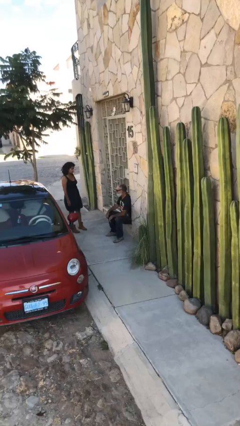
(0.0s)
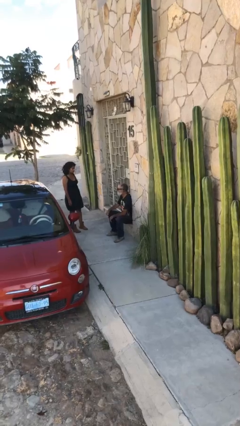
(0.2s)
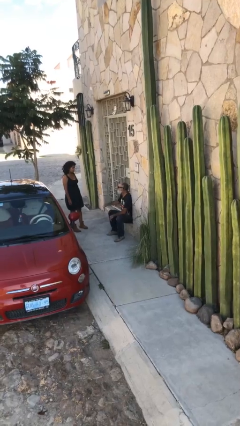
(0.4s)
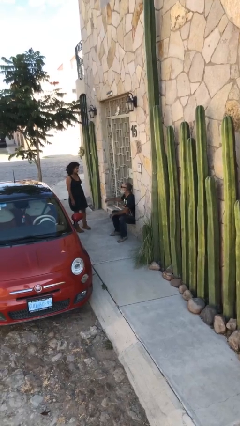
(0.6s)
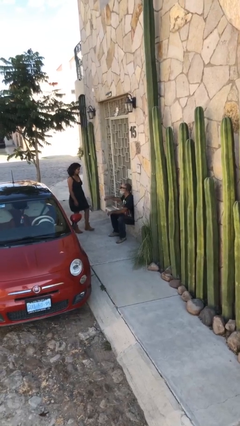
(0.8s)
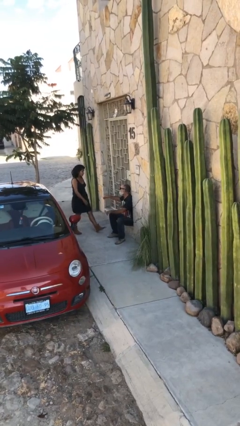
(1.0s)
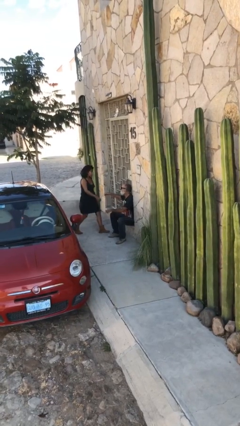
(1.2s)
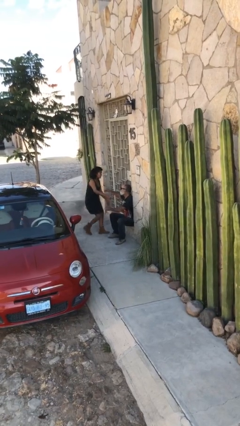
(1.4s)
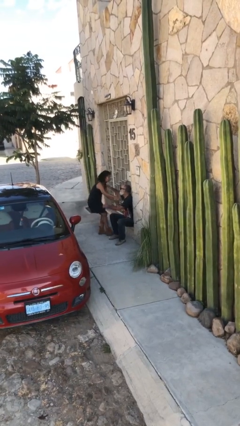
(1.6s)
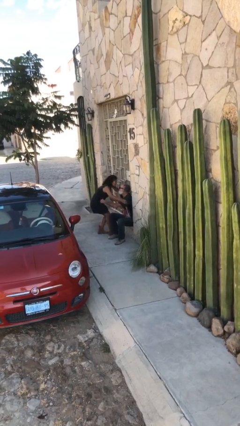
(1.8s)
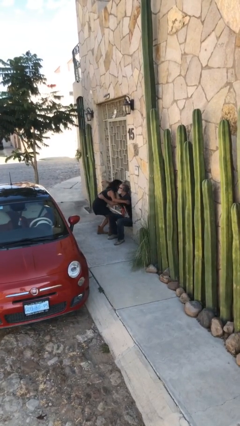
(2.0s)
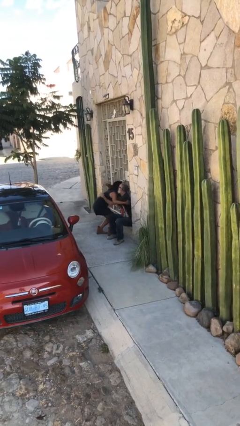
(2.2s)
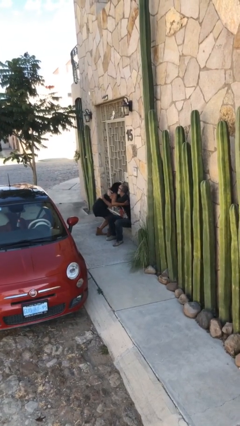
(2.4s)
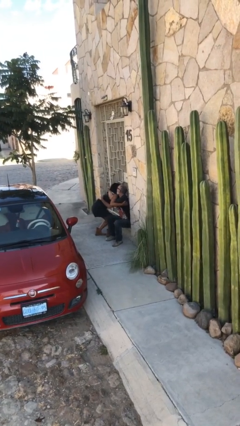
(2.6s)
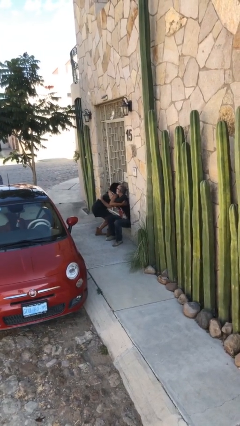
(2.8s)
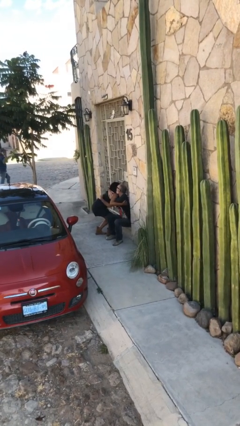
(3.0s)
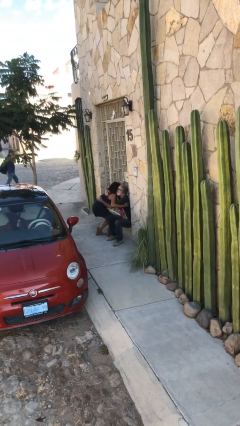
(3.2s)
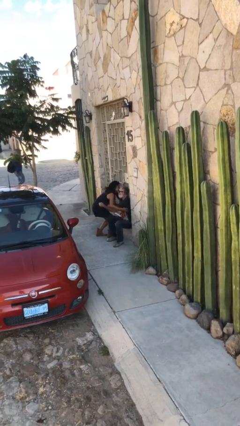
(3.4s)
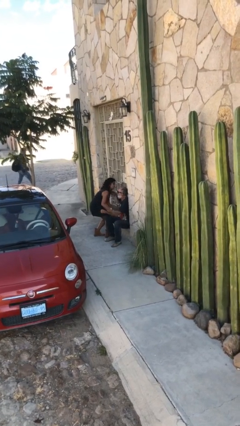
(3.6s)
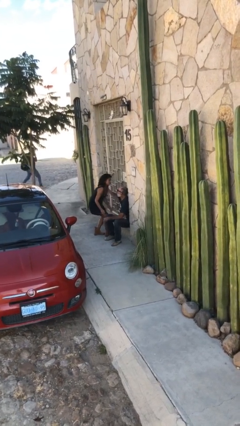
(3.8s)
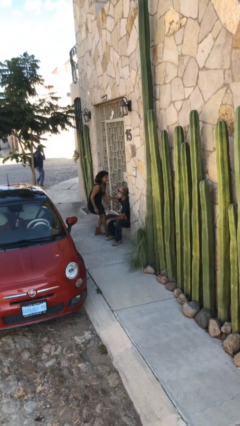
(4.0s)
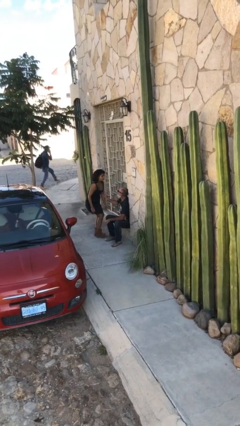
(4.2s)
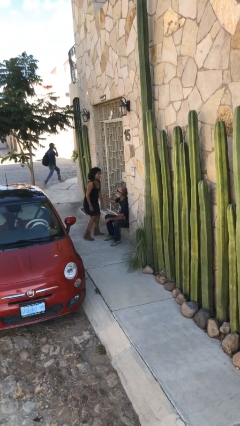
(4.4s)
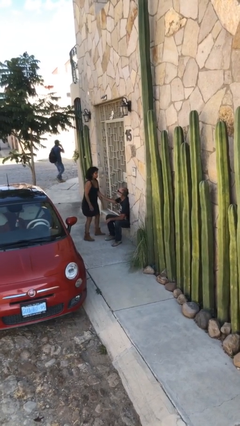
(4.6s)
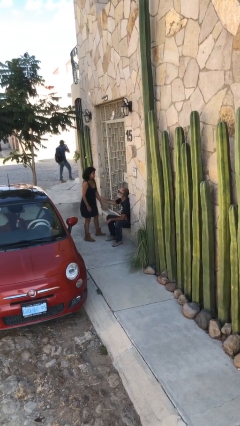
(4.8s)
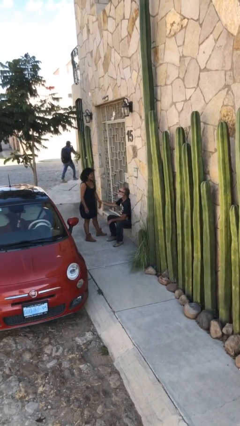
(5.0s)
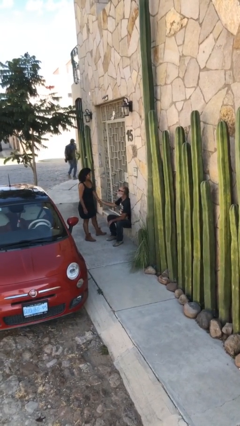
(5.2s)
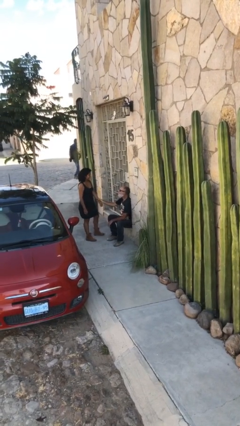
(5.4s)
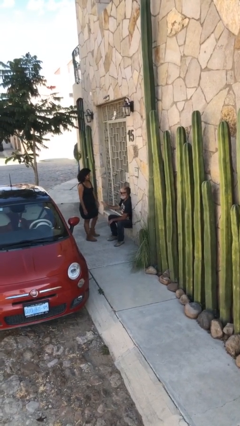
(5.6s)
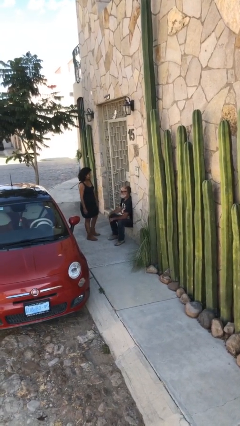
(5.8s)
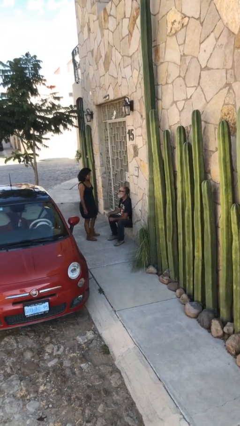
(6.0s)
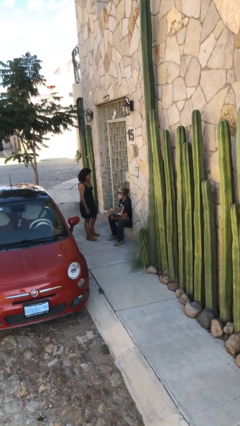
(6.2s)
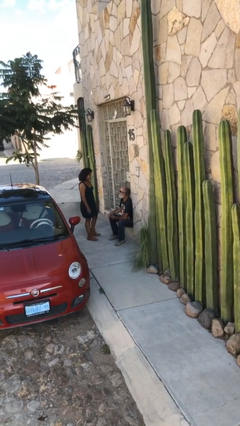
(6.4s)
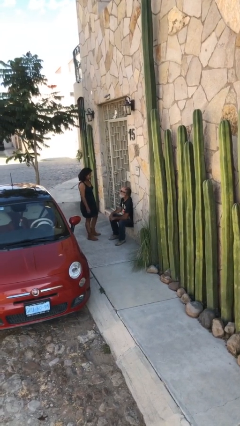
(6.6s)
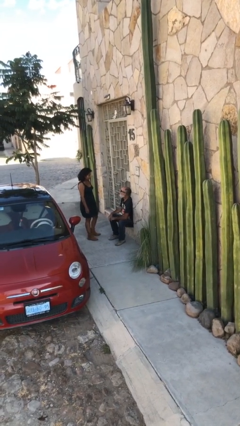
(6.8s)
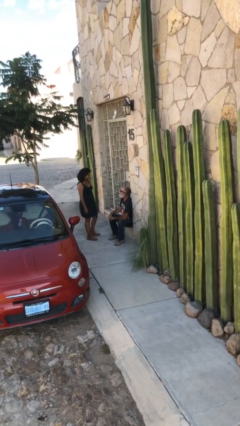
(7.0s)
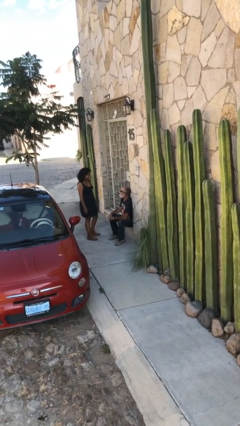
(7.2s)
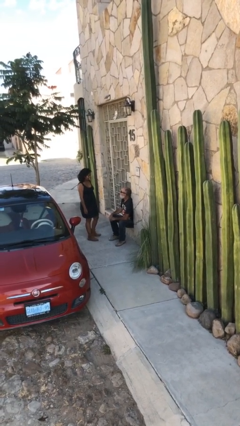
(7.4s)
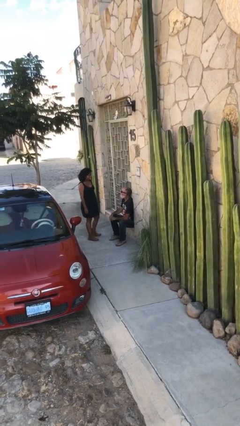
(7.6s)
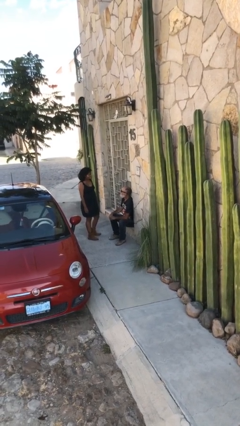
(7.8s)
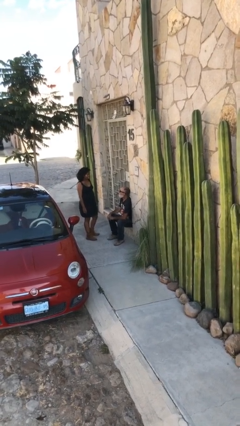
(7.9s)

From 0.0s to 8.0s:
person embraces person

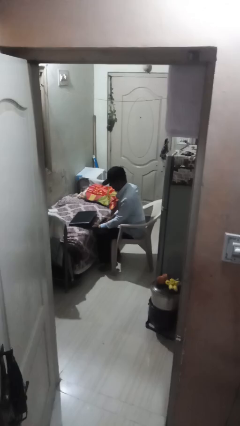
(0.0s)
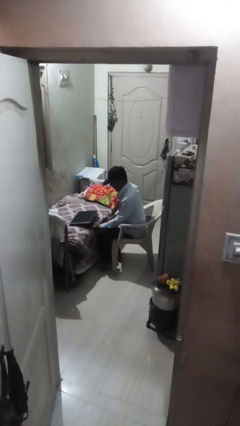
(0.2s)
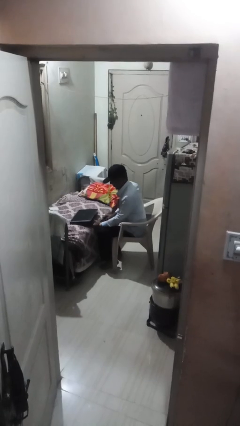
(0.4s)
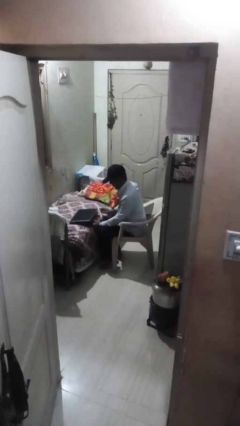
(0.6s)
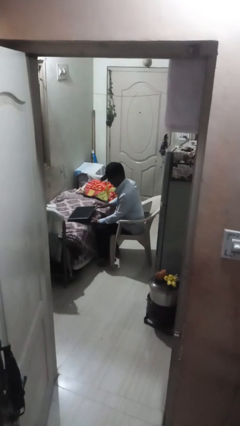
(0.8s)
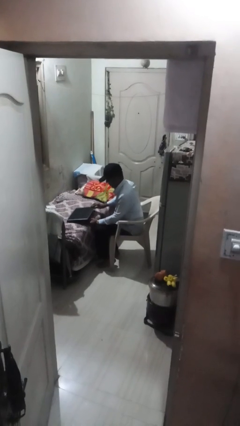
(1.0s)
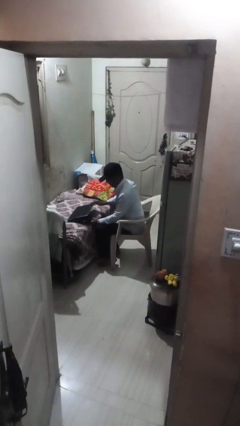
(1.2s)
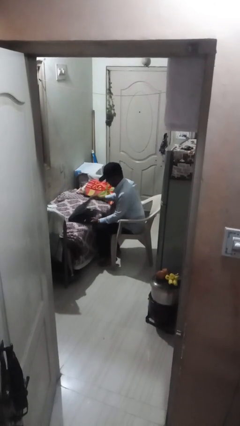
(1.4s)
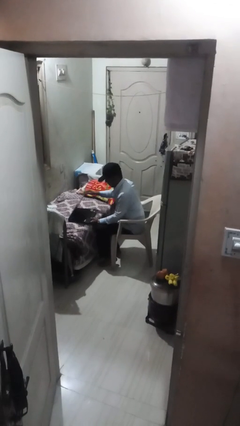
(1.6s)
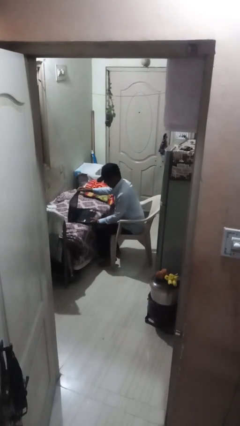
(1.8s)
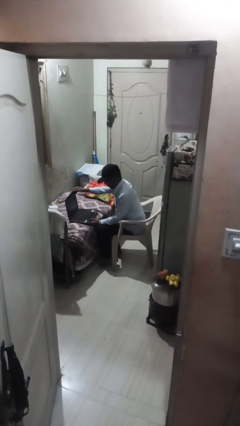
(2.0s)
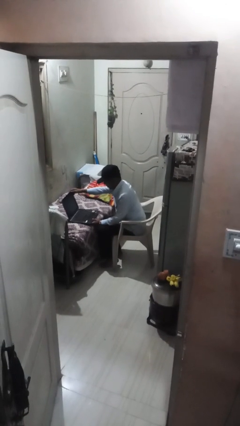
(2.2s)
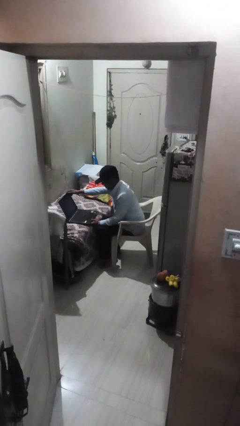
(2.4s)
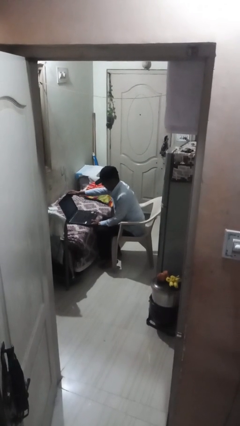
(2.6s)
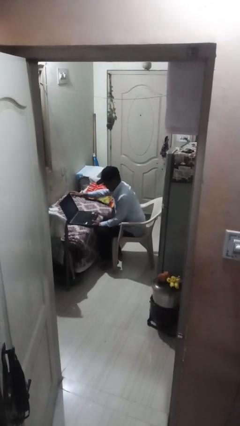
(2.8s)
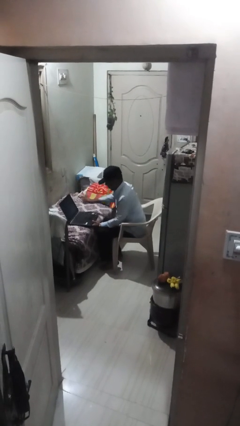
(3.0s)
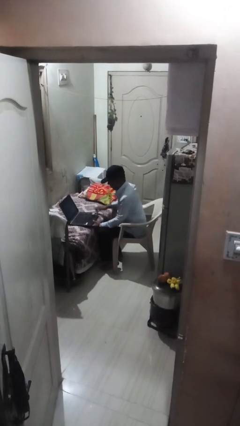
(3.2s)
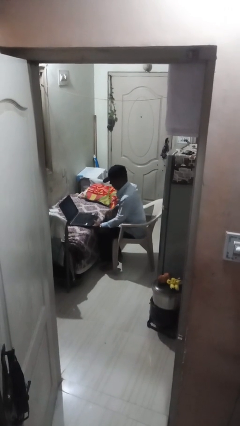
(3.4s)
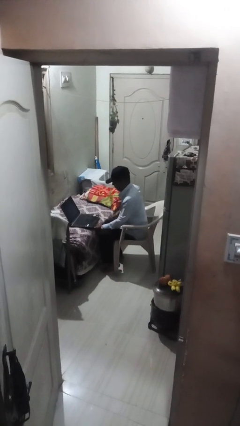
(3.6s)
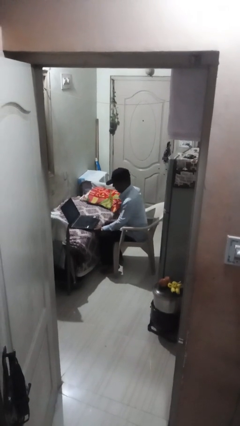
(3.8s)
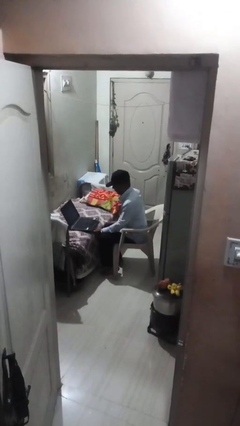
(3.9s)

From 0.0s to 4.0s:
person opens laptop

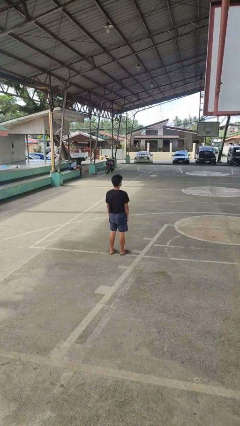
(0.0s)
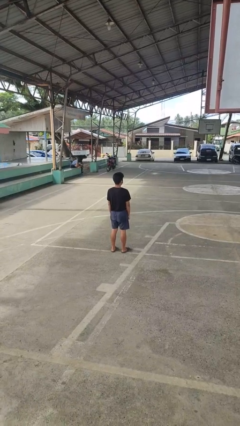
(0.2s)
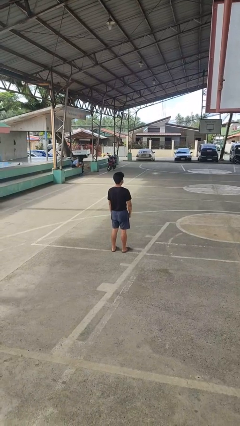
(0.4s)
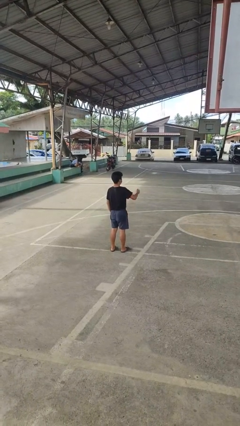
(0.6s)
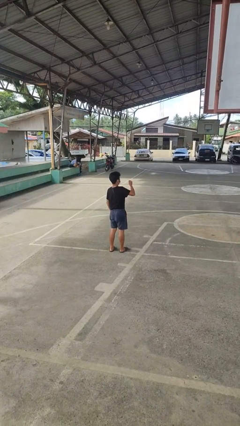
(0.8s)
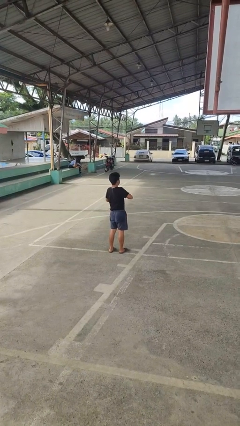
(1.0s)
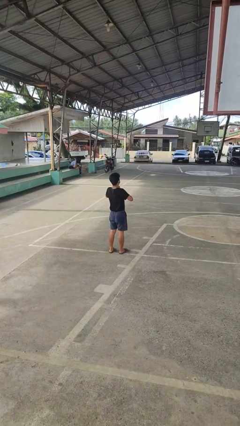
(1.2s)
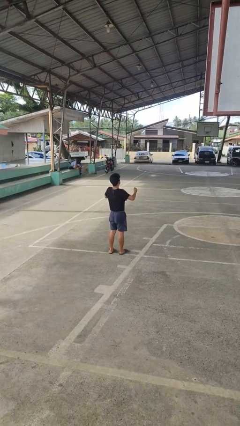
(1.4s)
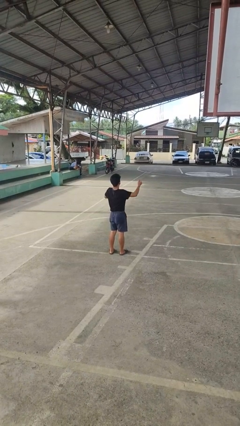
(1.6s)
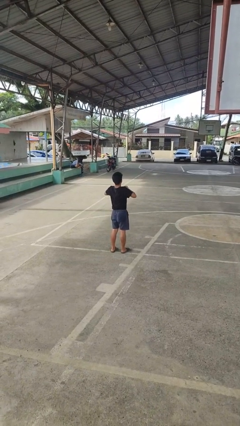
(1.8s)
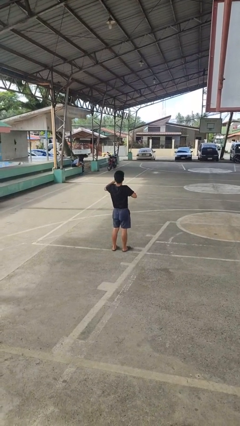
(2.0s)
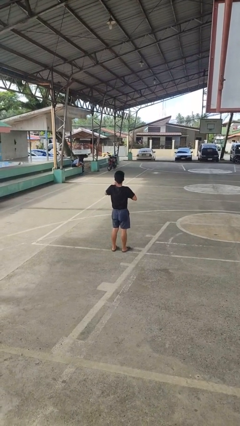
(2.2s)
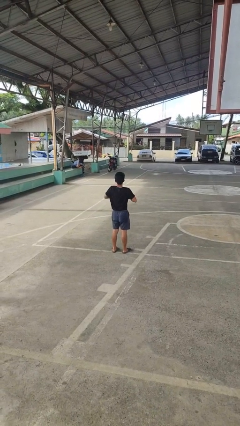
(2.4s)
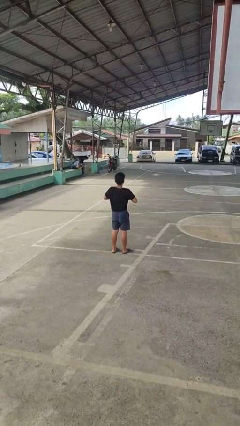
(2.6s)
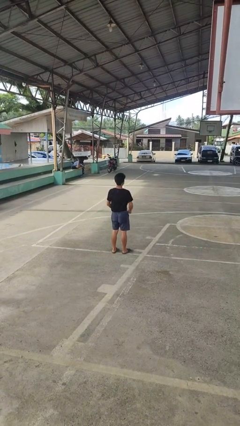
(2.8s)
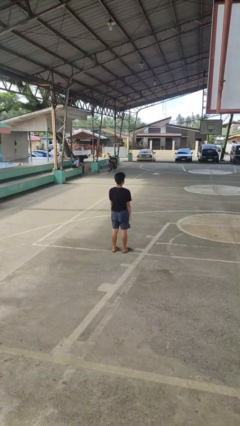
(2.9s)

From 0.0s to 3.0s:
person drums on chest

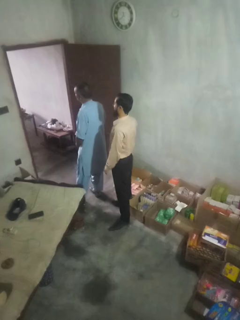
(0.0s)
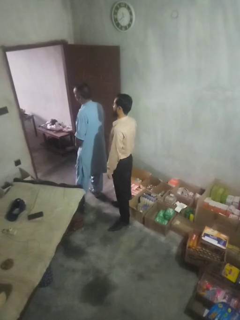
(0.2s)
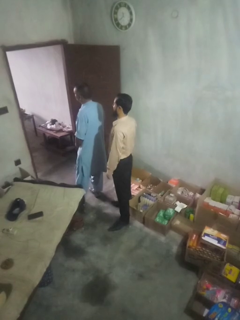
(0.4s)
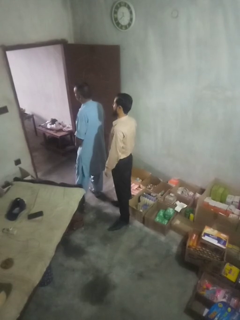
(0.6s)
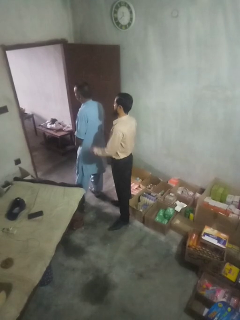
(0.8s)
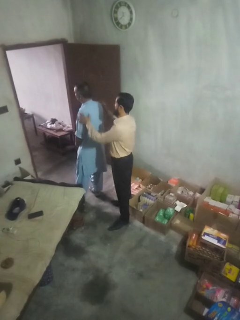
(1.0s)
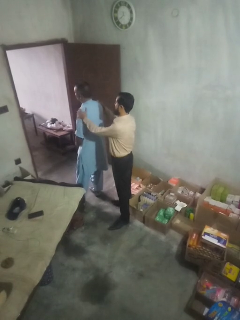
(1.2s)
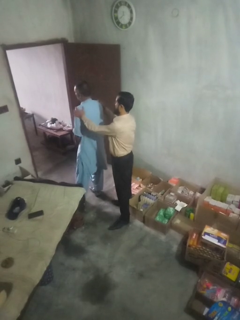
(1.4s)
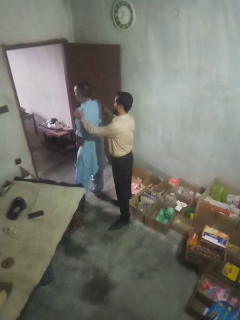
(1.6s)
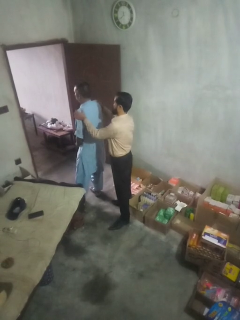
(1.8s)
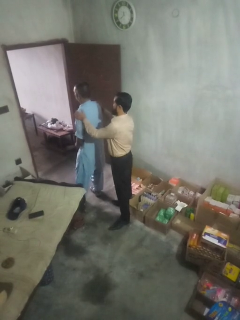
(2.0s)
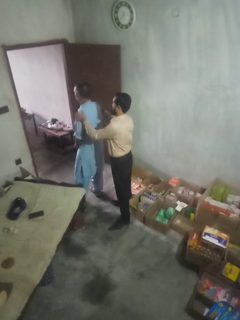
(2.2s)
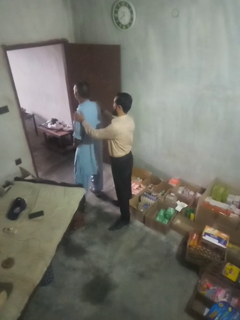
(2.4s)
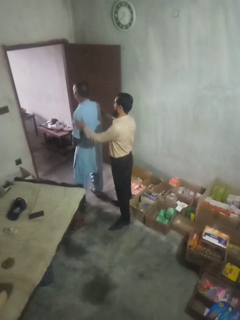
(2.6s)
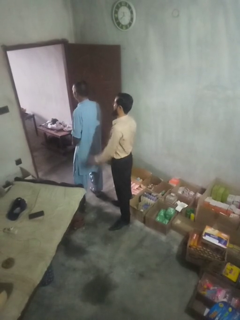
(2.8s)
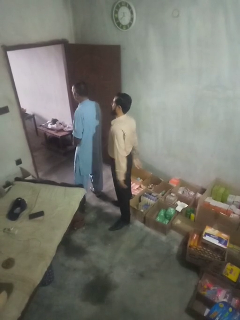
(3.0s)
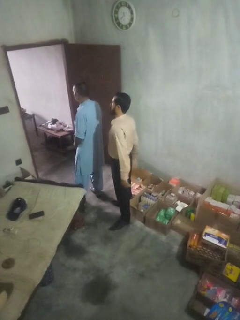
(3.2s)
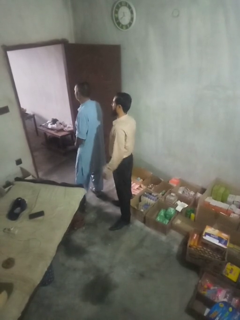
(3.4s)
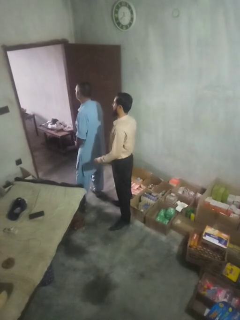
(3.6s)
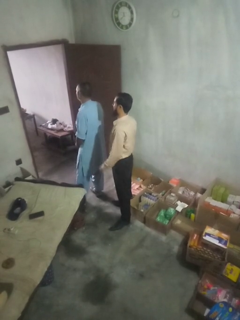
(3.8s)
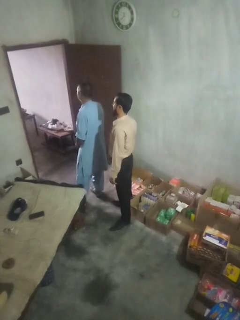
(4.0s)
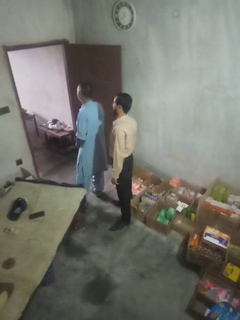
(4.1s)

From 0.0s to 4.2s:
person pounds shoulders of person
